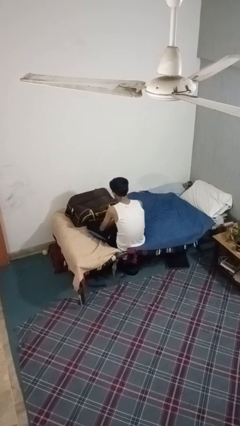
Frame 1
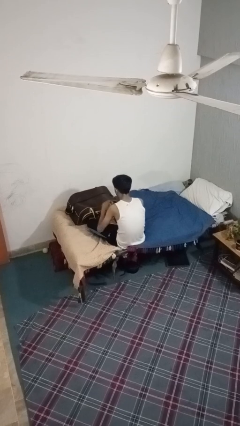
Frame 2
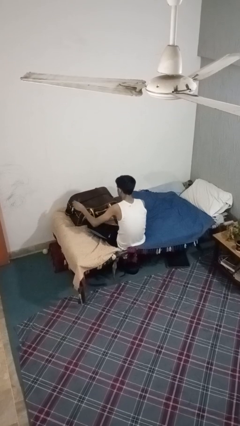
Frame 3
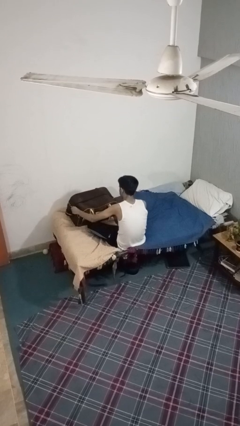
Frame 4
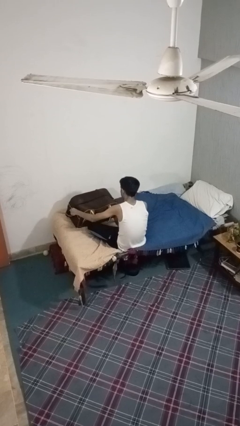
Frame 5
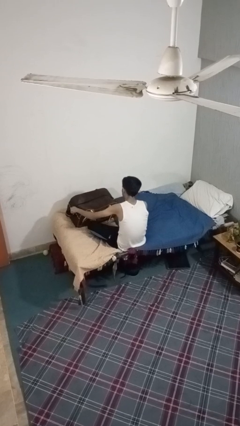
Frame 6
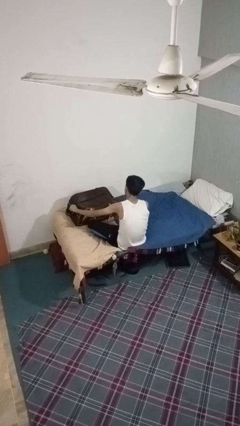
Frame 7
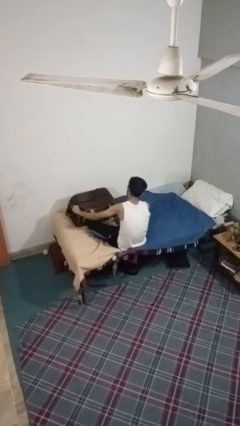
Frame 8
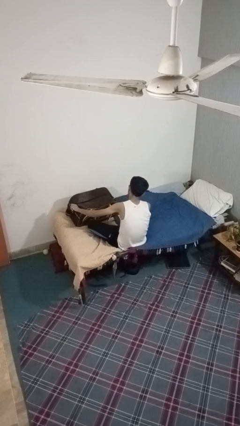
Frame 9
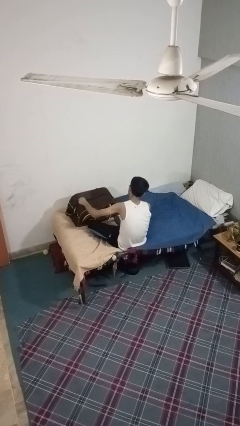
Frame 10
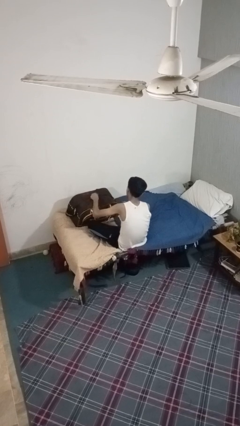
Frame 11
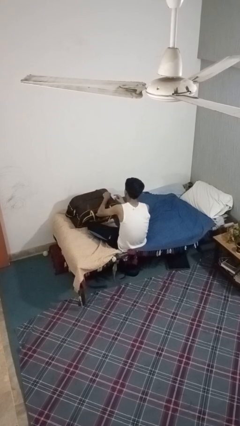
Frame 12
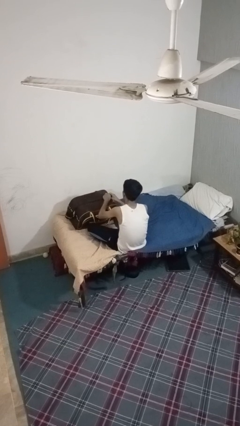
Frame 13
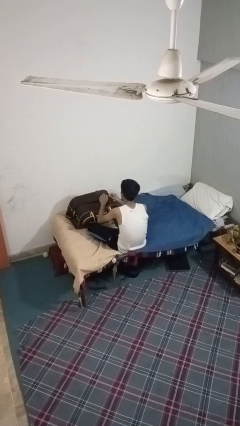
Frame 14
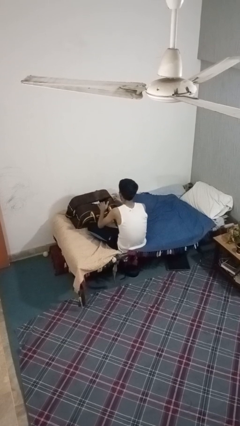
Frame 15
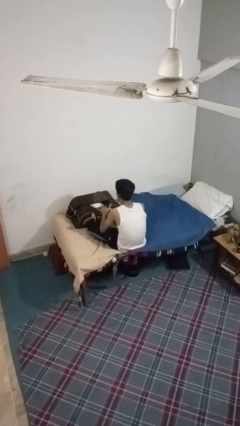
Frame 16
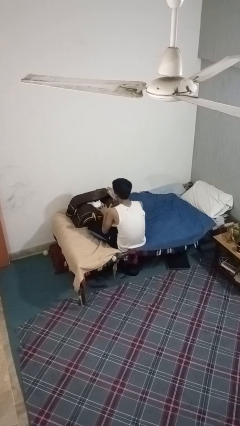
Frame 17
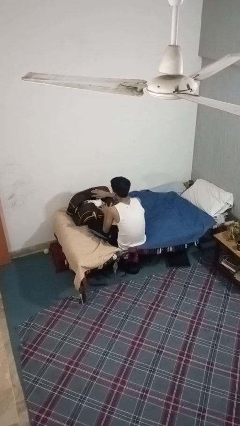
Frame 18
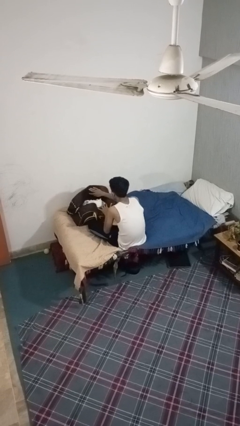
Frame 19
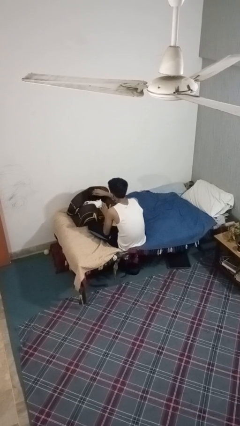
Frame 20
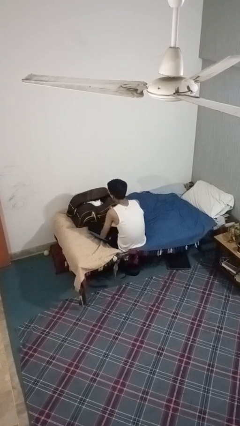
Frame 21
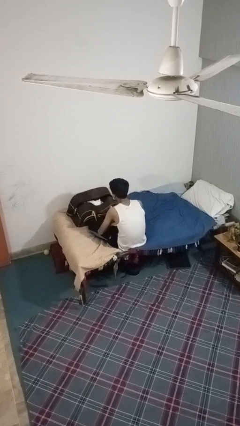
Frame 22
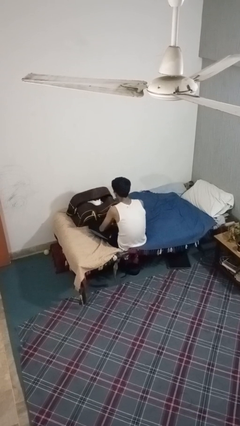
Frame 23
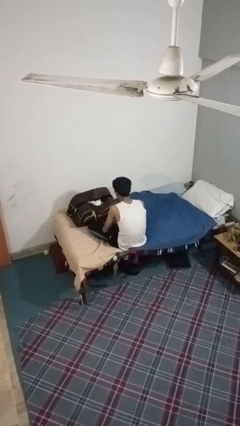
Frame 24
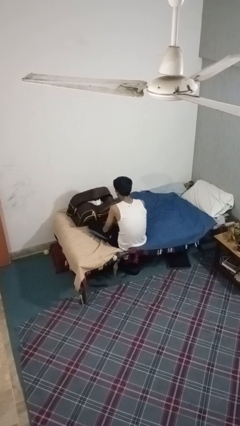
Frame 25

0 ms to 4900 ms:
person opens suitcase

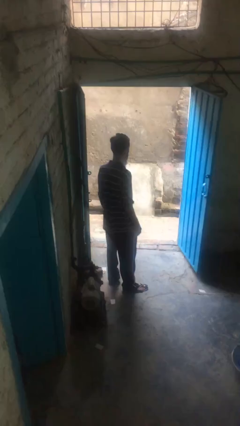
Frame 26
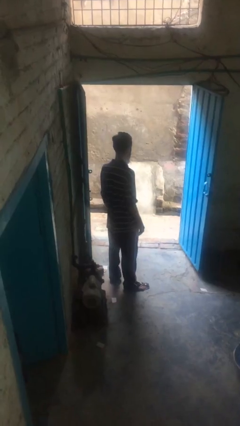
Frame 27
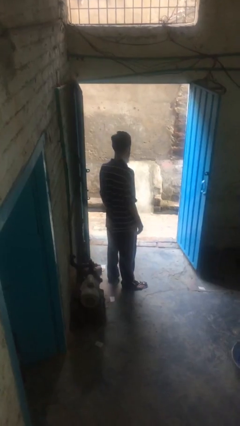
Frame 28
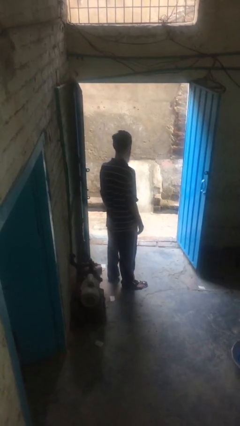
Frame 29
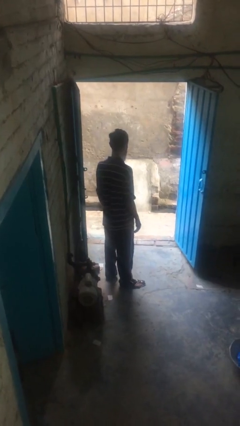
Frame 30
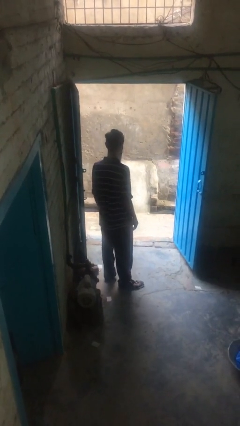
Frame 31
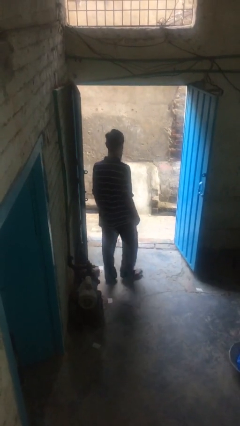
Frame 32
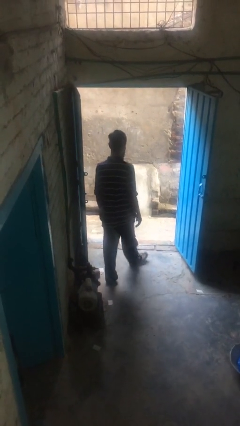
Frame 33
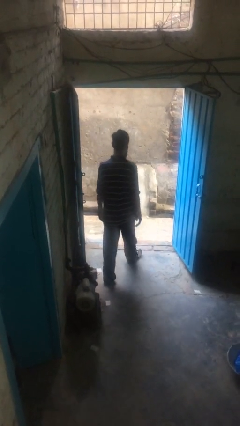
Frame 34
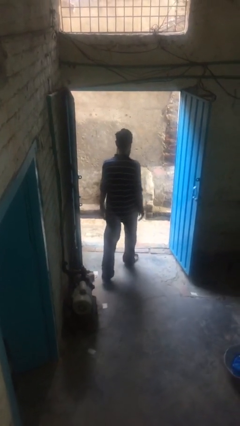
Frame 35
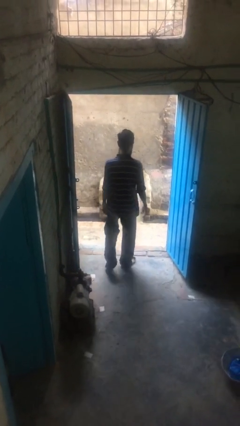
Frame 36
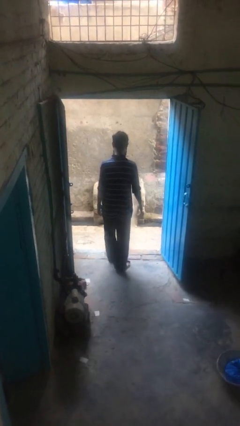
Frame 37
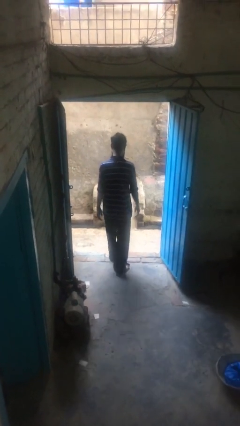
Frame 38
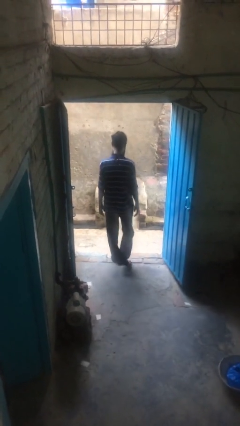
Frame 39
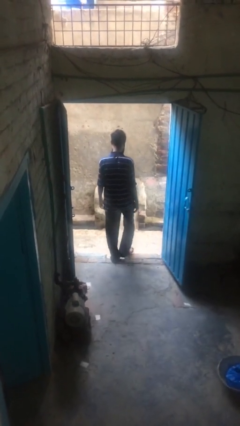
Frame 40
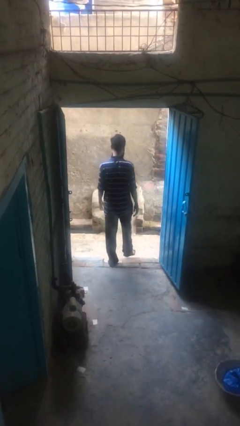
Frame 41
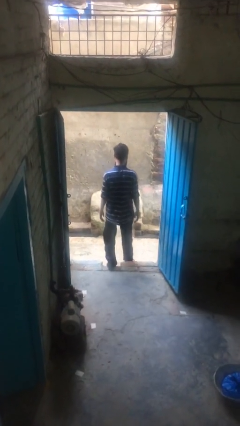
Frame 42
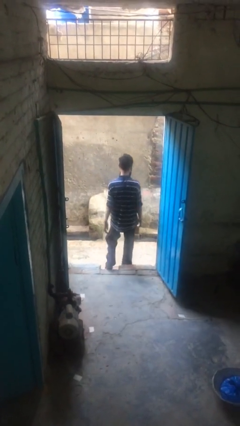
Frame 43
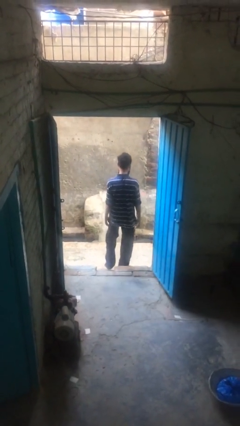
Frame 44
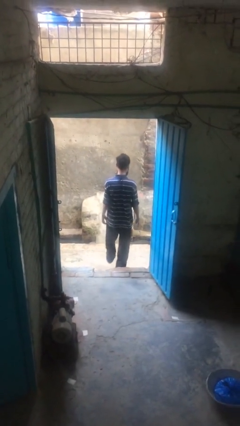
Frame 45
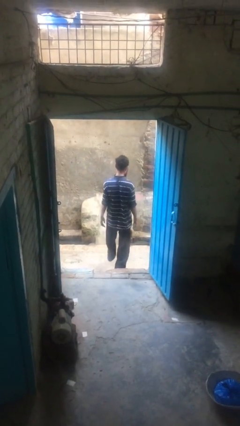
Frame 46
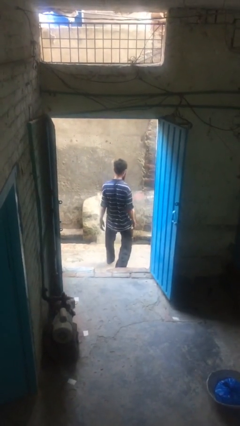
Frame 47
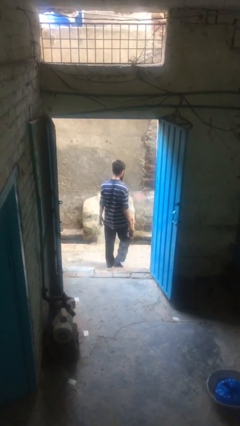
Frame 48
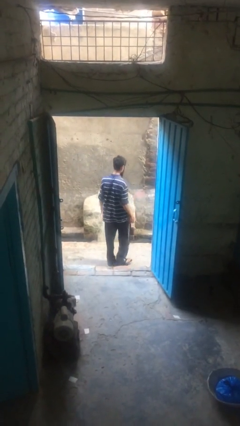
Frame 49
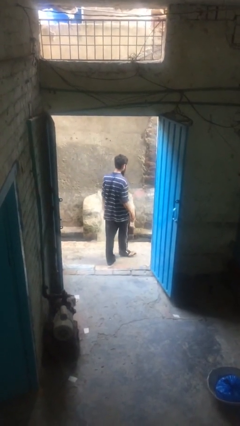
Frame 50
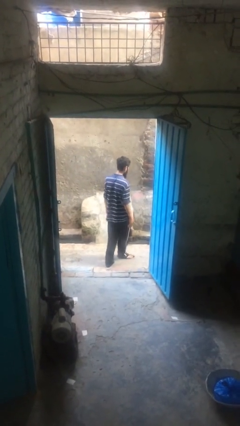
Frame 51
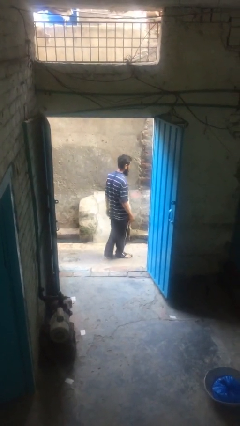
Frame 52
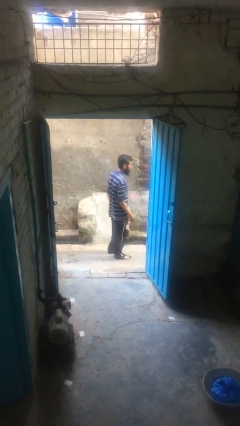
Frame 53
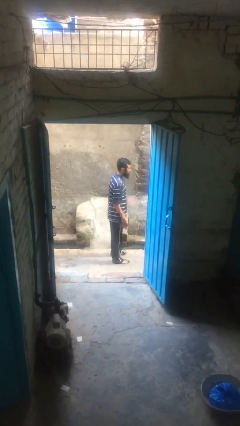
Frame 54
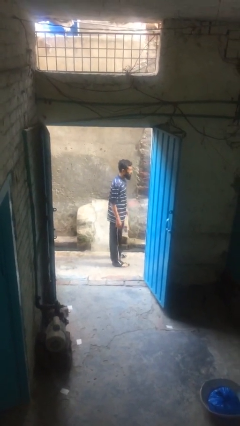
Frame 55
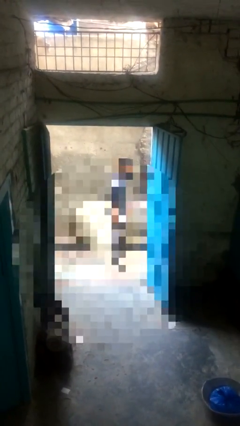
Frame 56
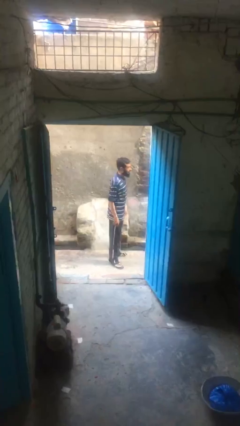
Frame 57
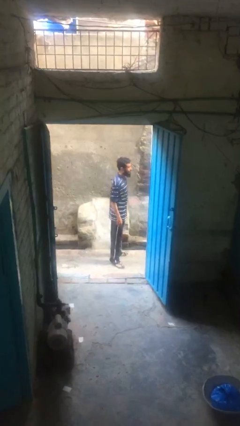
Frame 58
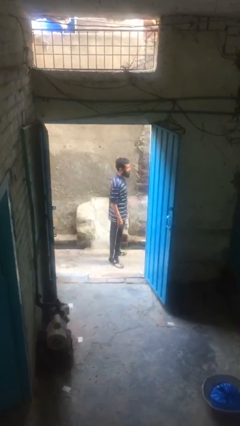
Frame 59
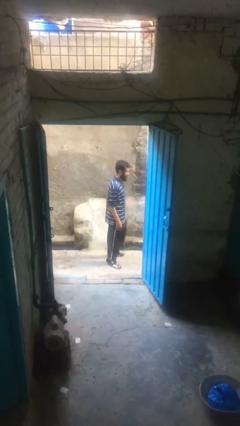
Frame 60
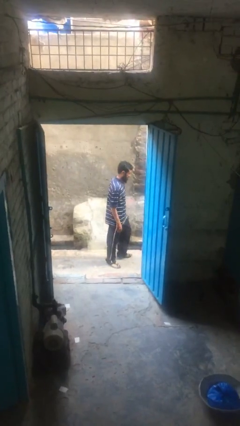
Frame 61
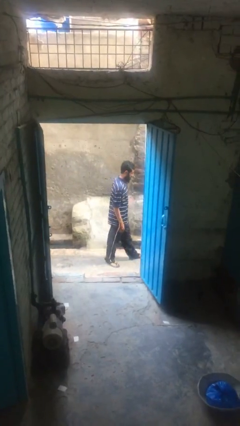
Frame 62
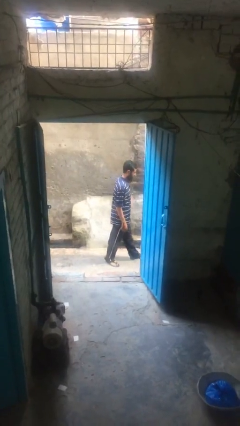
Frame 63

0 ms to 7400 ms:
person exits scene through structure

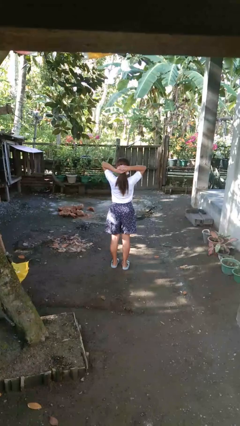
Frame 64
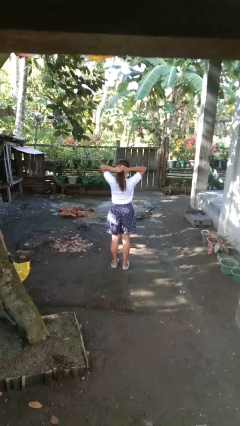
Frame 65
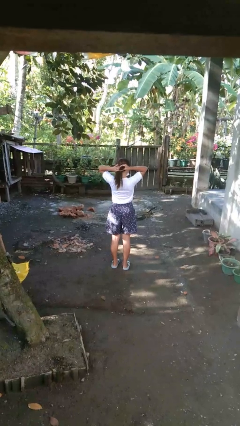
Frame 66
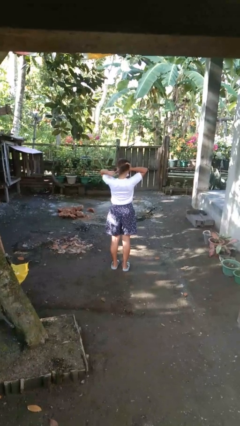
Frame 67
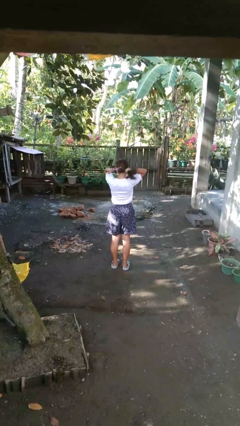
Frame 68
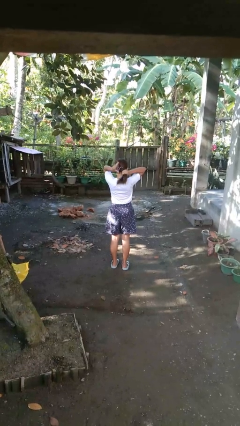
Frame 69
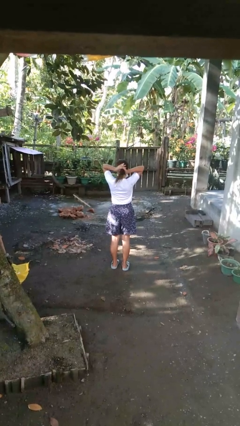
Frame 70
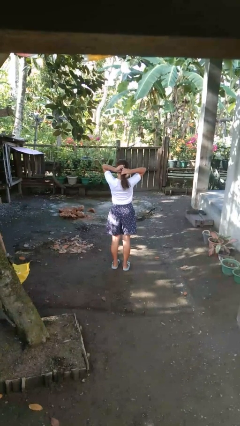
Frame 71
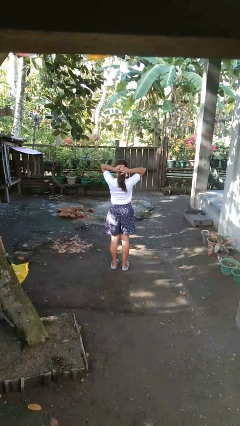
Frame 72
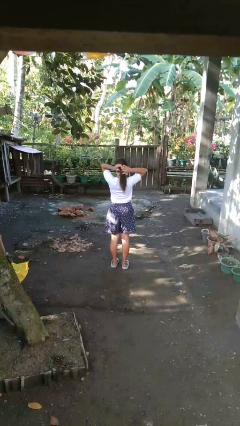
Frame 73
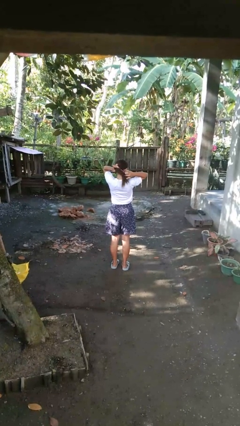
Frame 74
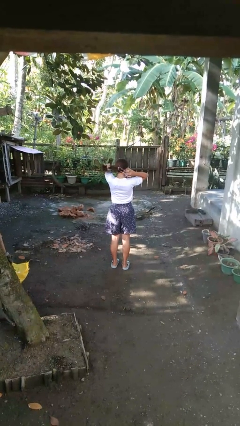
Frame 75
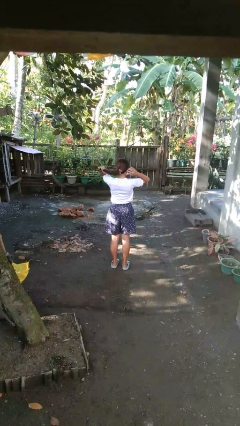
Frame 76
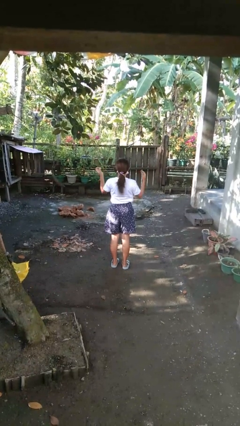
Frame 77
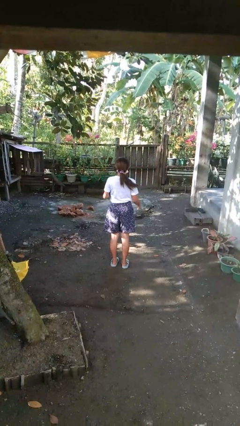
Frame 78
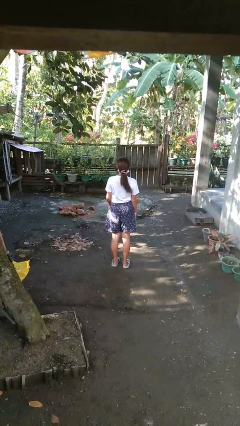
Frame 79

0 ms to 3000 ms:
person puts hair in ponytail

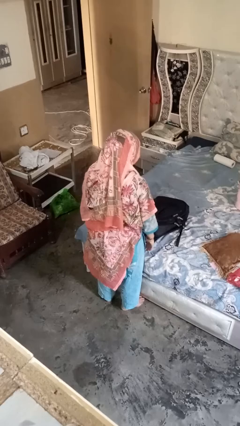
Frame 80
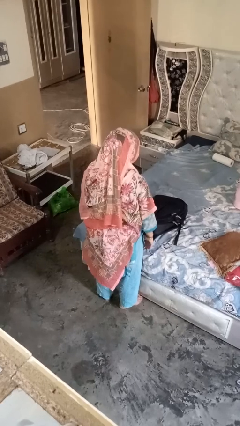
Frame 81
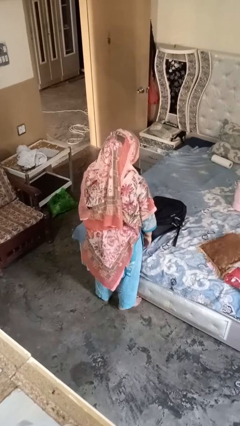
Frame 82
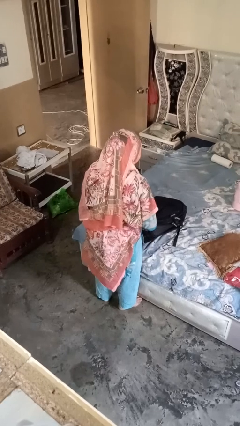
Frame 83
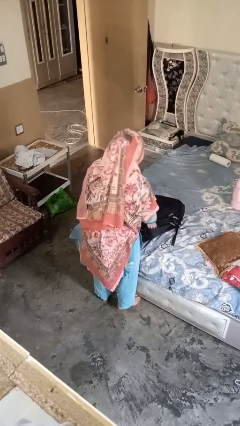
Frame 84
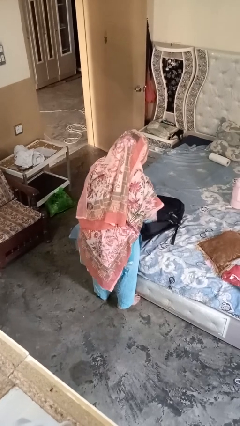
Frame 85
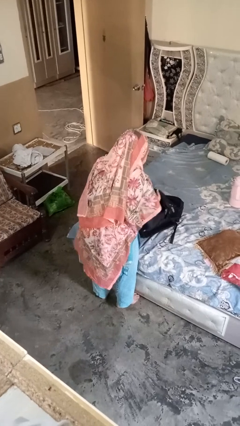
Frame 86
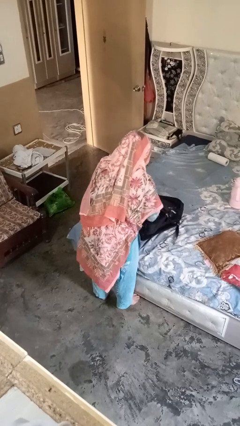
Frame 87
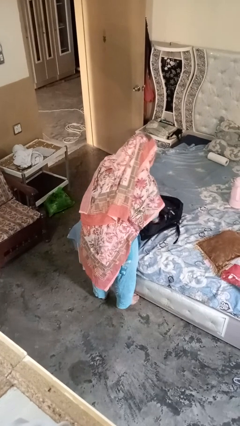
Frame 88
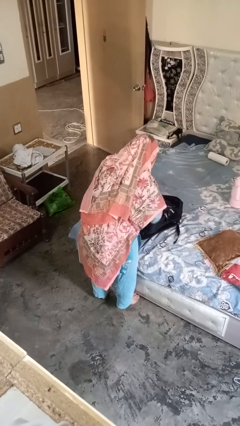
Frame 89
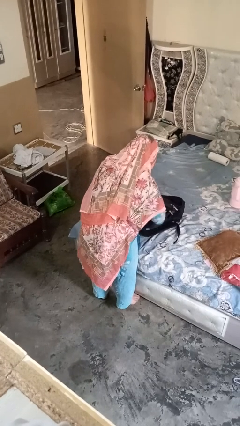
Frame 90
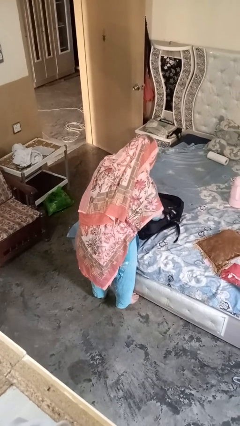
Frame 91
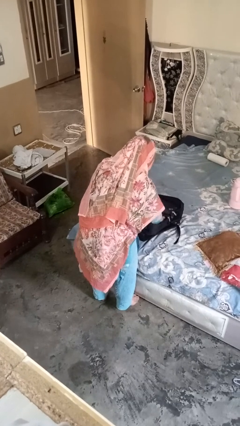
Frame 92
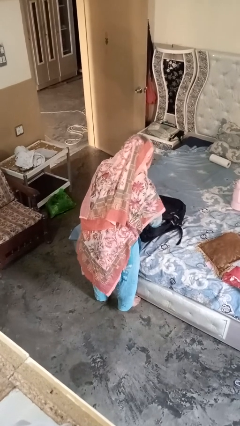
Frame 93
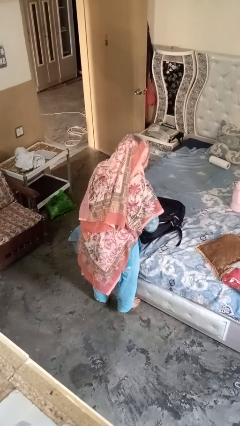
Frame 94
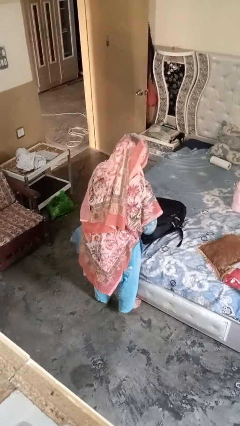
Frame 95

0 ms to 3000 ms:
person searches in bag
